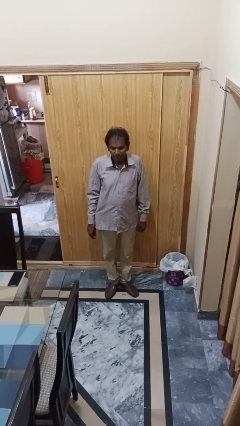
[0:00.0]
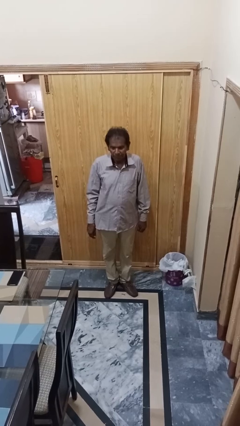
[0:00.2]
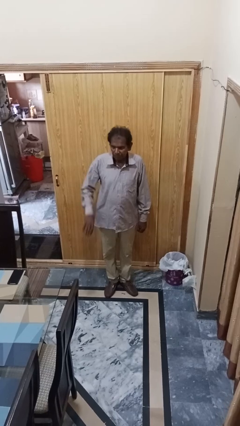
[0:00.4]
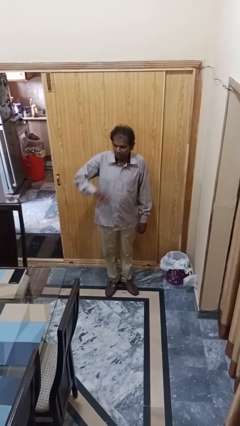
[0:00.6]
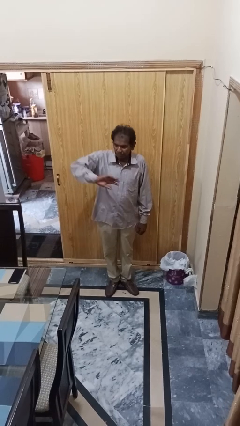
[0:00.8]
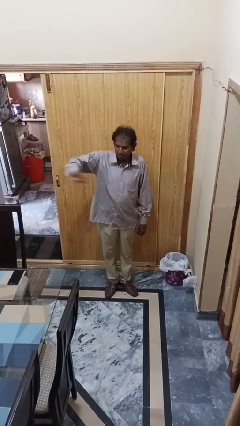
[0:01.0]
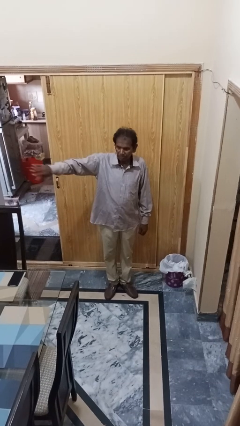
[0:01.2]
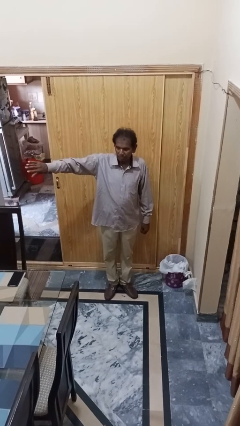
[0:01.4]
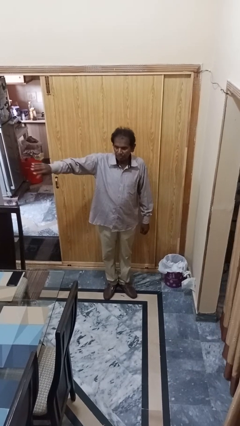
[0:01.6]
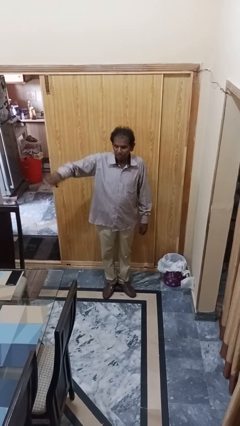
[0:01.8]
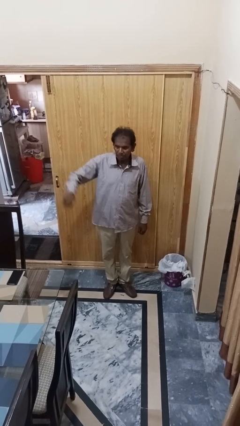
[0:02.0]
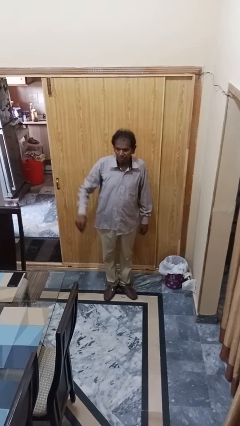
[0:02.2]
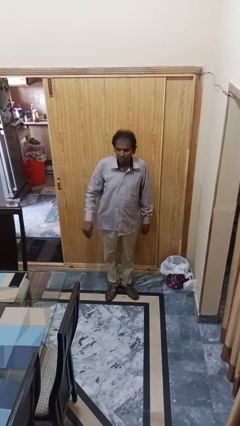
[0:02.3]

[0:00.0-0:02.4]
person gestures swipe left

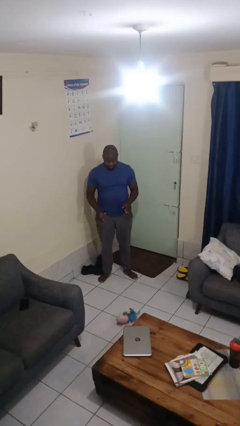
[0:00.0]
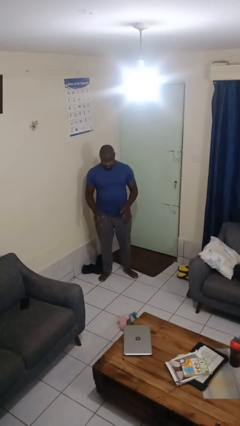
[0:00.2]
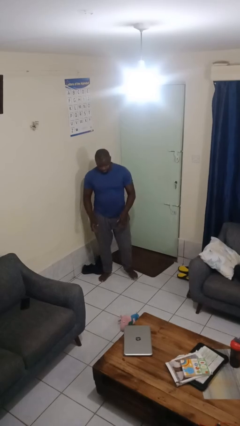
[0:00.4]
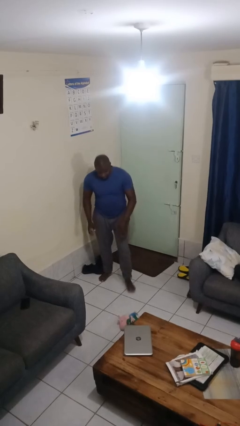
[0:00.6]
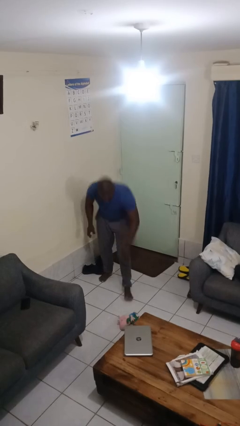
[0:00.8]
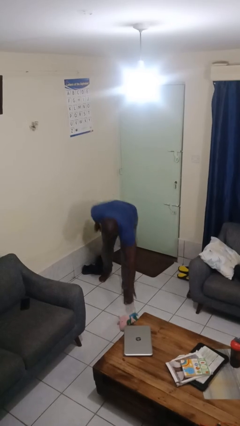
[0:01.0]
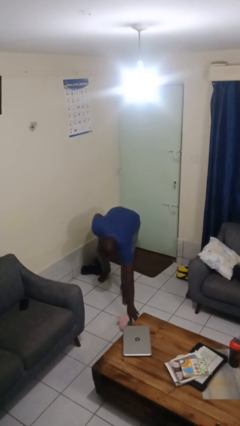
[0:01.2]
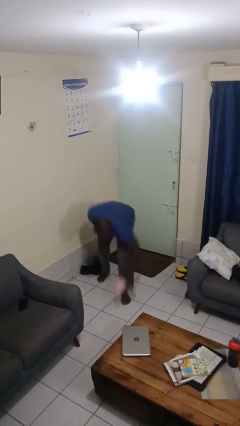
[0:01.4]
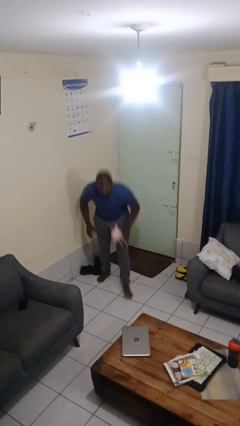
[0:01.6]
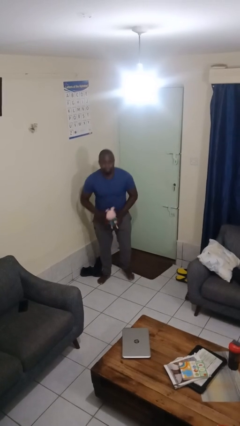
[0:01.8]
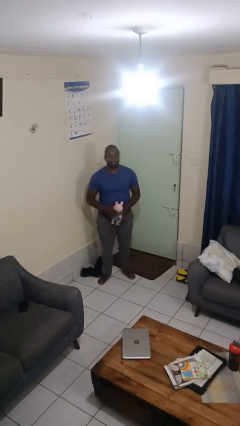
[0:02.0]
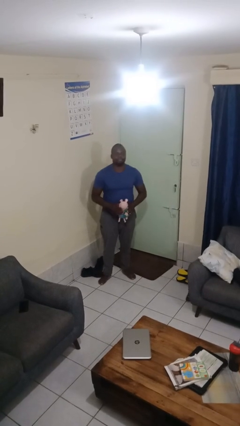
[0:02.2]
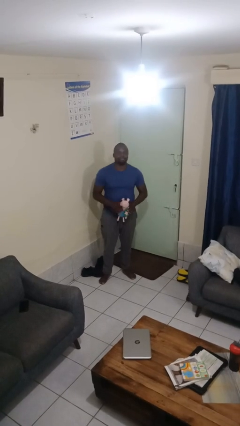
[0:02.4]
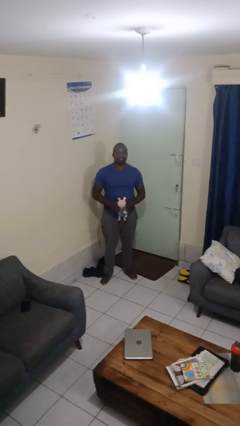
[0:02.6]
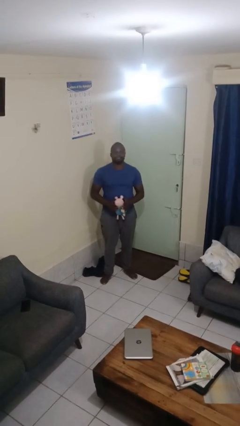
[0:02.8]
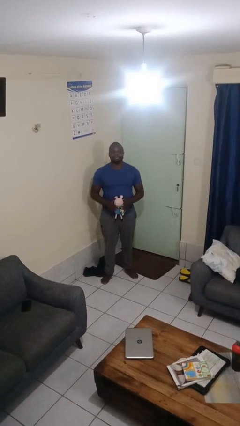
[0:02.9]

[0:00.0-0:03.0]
person picks up object from floor

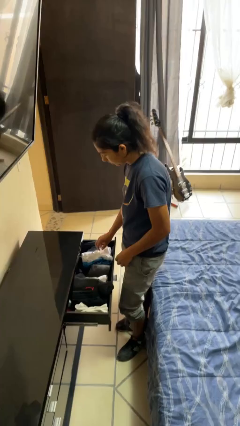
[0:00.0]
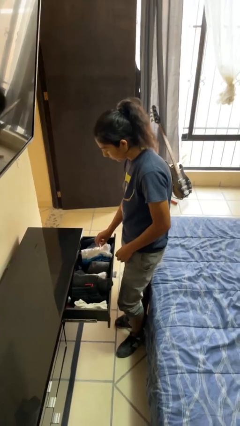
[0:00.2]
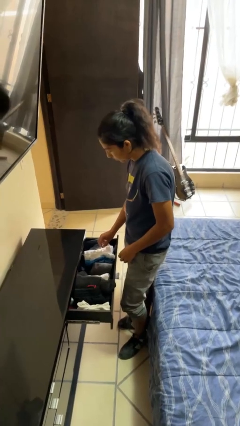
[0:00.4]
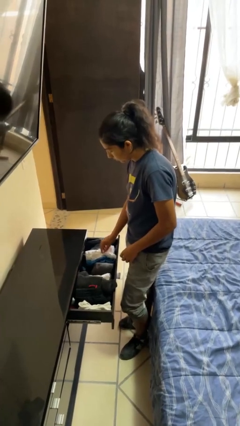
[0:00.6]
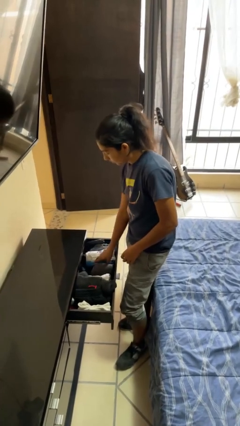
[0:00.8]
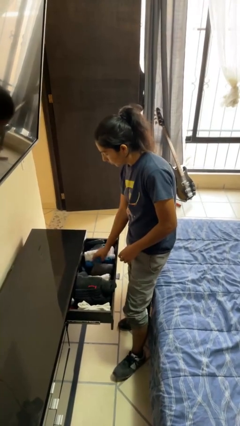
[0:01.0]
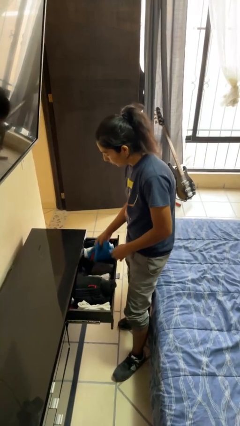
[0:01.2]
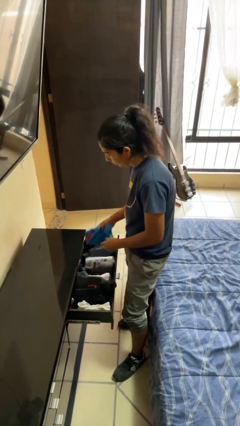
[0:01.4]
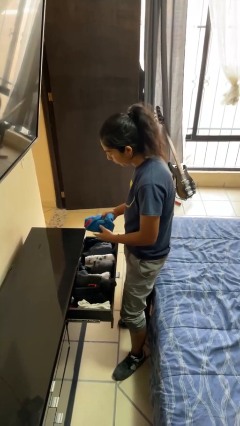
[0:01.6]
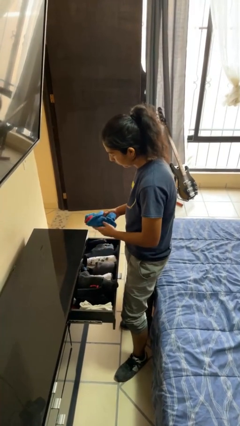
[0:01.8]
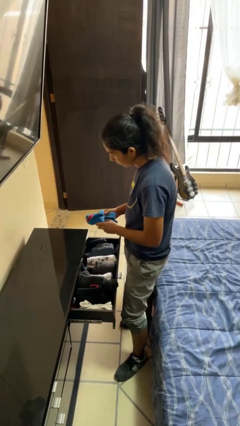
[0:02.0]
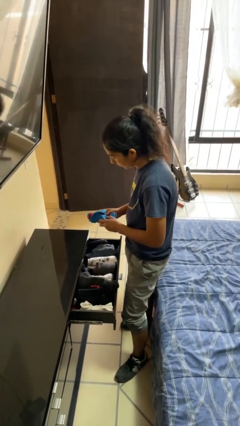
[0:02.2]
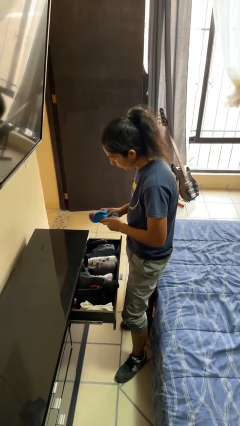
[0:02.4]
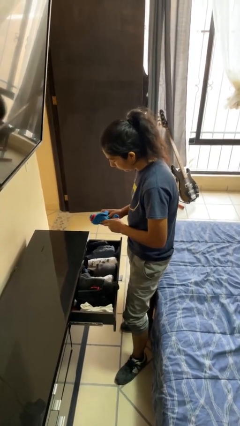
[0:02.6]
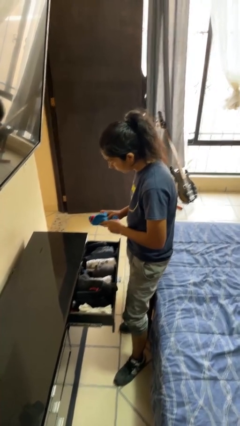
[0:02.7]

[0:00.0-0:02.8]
person takes clothes from dresser

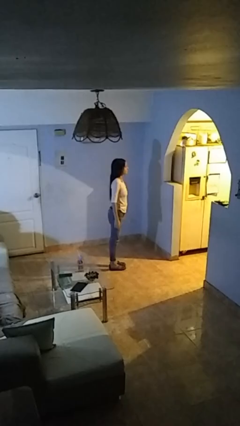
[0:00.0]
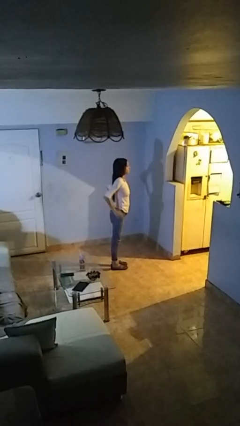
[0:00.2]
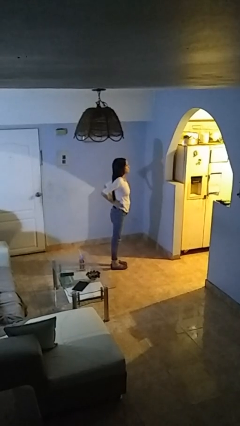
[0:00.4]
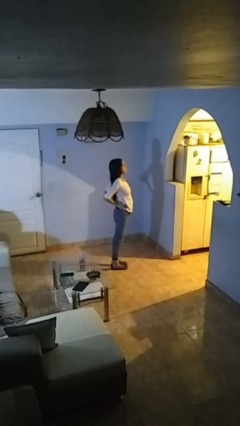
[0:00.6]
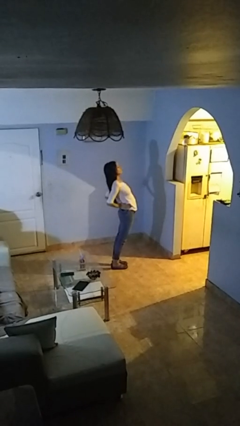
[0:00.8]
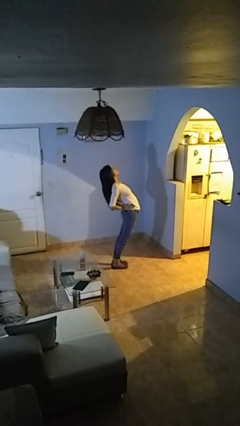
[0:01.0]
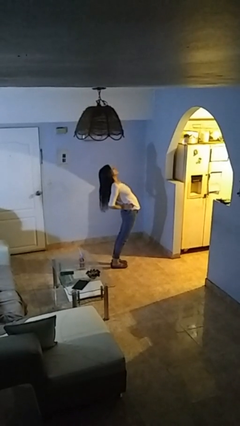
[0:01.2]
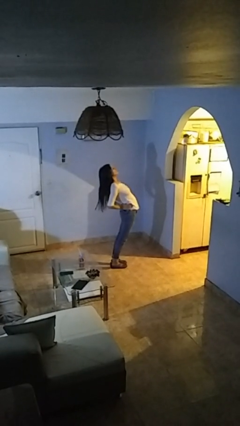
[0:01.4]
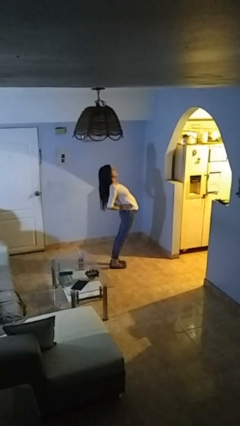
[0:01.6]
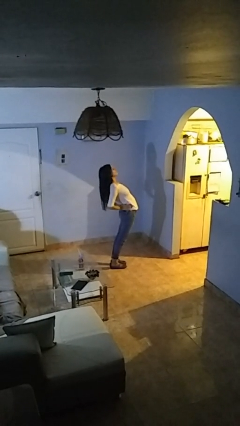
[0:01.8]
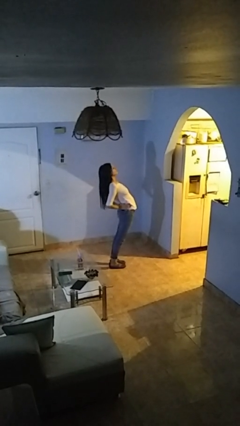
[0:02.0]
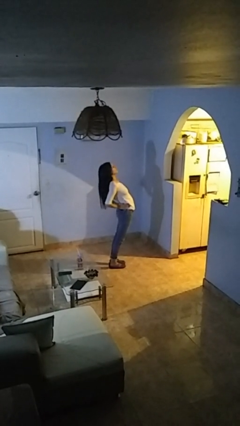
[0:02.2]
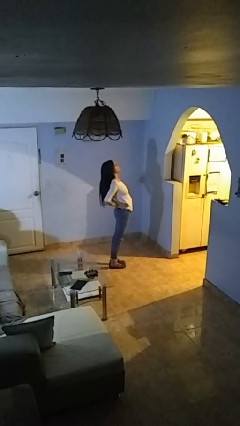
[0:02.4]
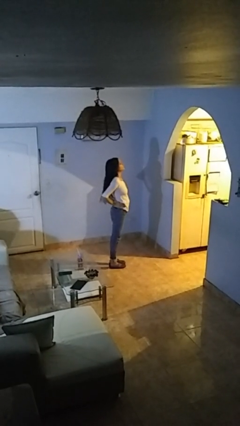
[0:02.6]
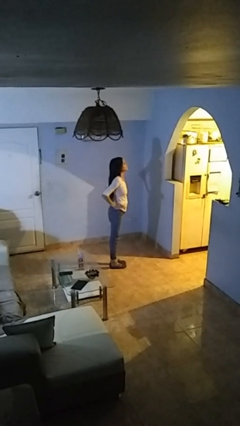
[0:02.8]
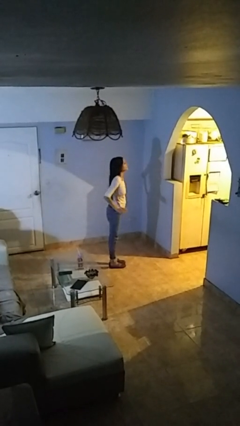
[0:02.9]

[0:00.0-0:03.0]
person stretches back

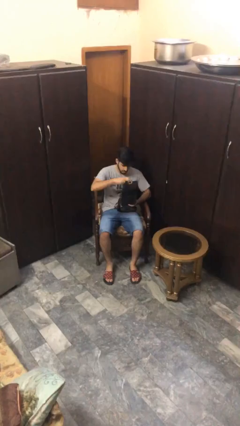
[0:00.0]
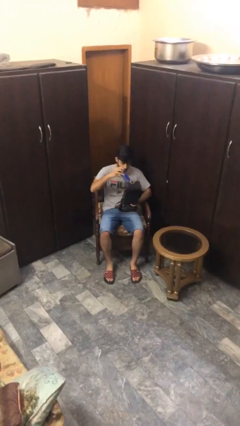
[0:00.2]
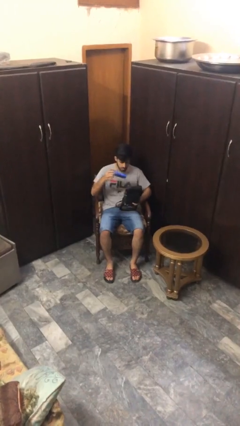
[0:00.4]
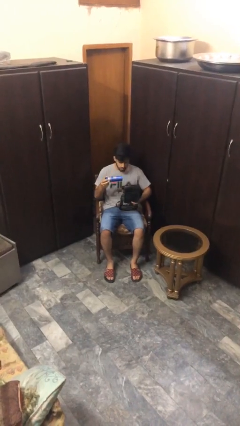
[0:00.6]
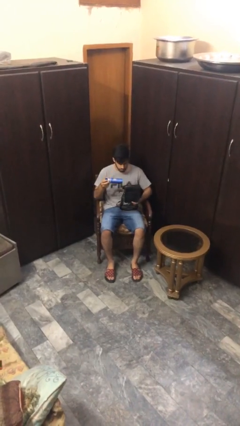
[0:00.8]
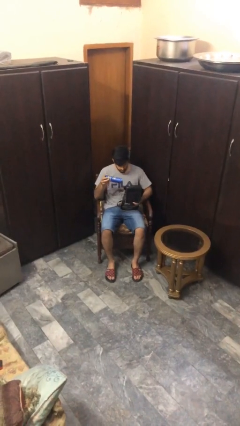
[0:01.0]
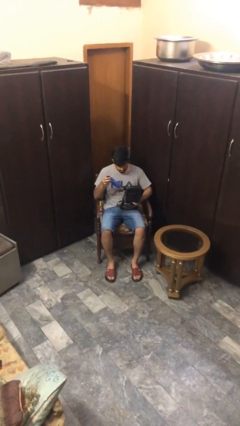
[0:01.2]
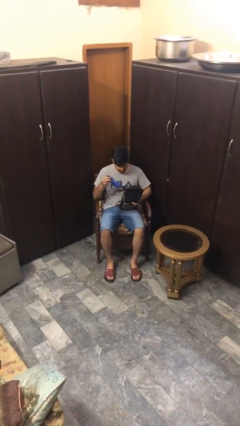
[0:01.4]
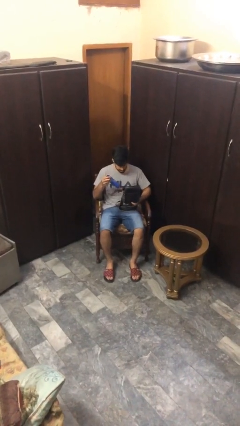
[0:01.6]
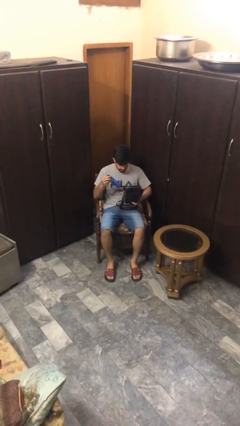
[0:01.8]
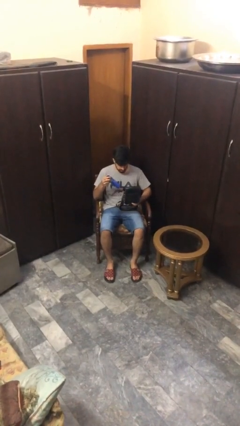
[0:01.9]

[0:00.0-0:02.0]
person takes object from purse

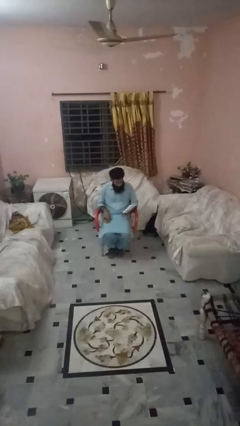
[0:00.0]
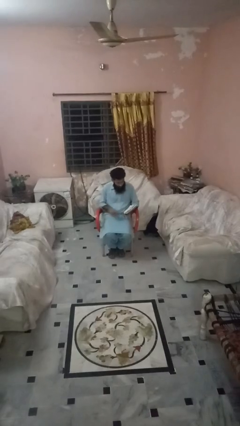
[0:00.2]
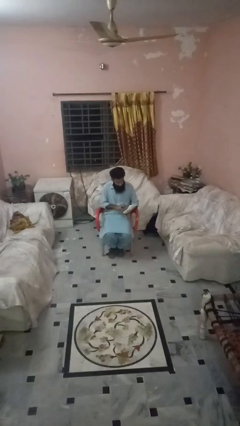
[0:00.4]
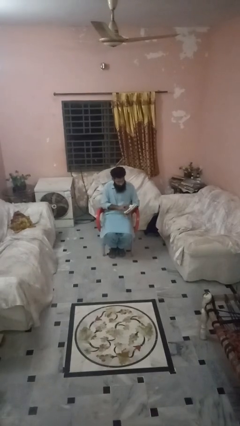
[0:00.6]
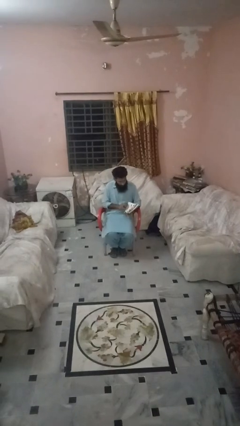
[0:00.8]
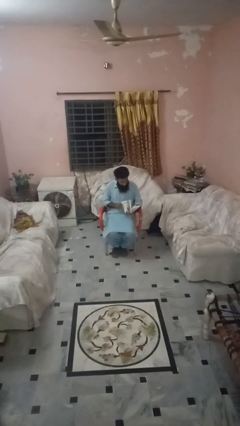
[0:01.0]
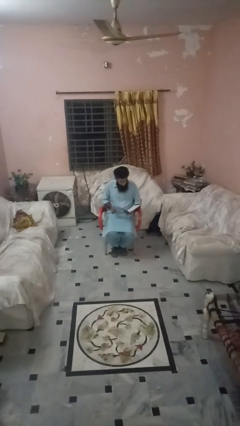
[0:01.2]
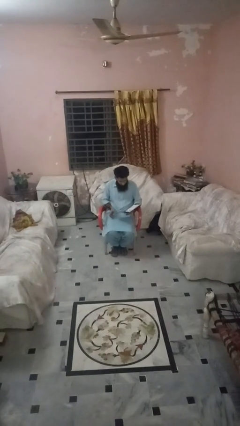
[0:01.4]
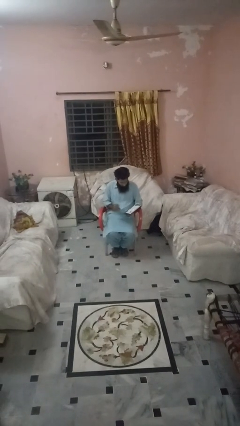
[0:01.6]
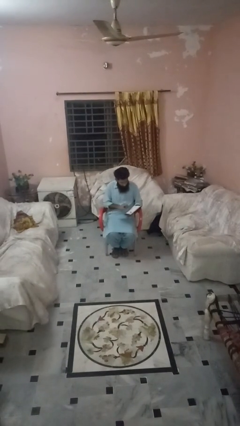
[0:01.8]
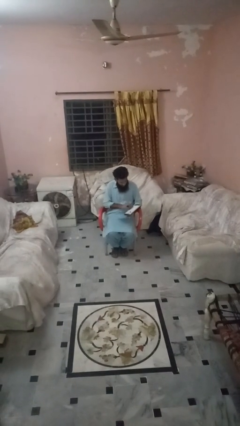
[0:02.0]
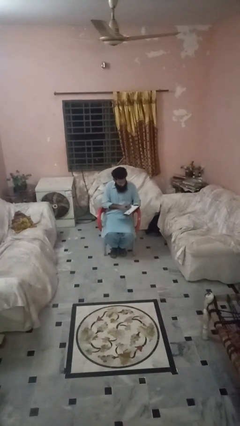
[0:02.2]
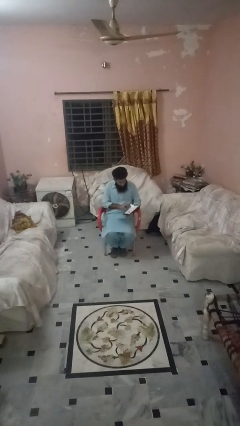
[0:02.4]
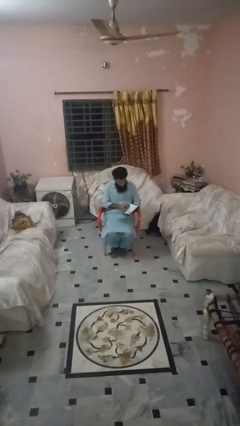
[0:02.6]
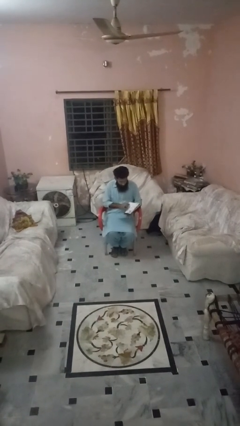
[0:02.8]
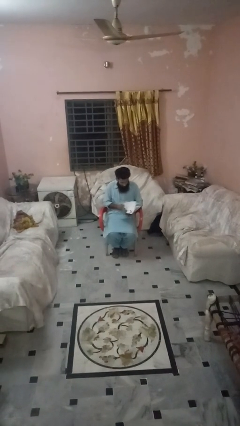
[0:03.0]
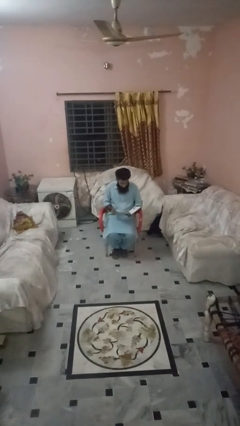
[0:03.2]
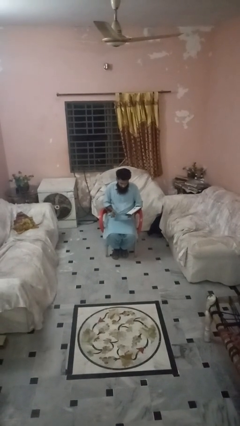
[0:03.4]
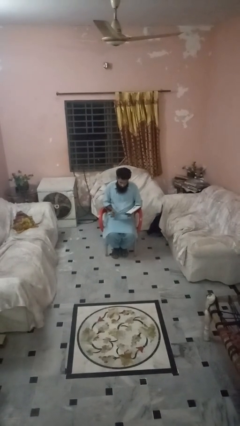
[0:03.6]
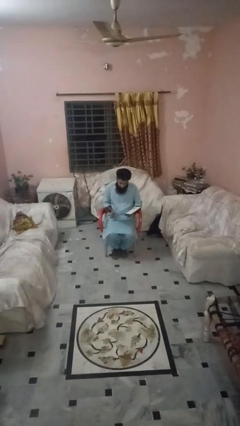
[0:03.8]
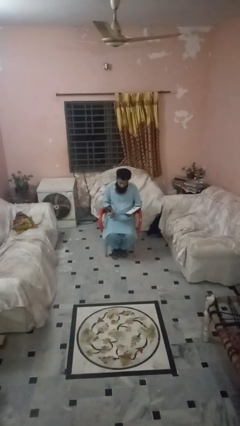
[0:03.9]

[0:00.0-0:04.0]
person reads magazine
